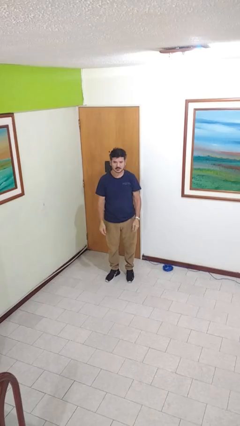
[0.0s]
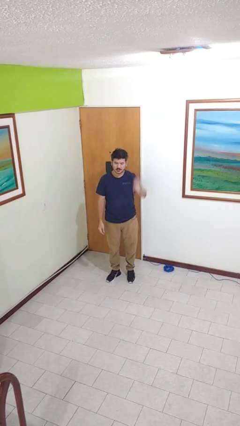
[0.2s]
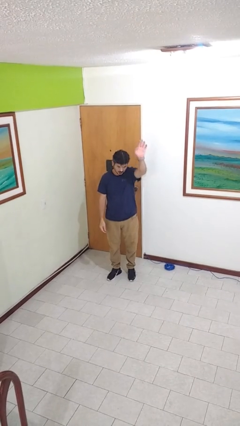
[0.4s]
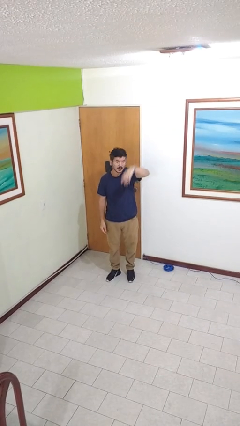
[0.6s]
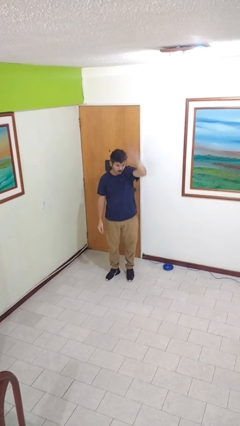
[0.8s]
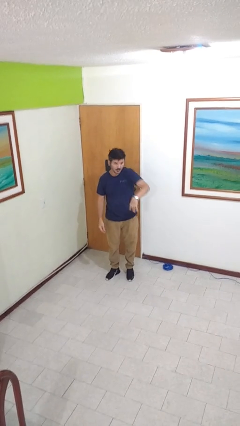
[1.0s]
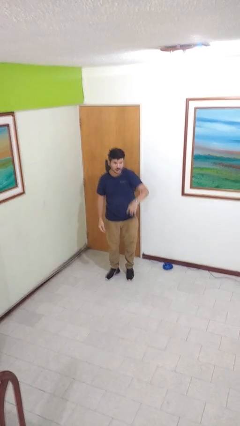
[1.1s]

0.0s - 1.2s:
person gestures come here

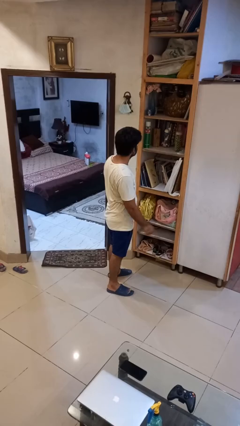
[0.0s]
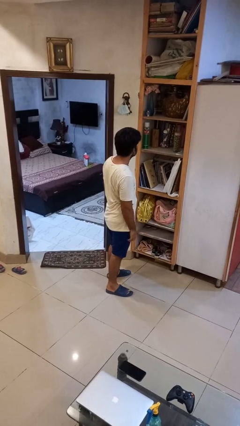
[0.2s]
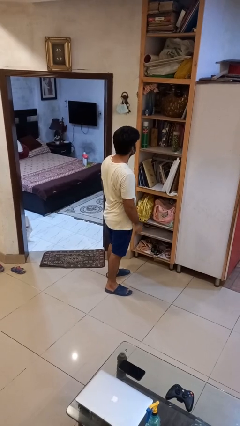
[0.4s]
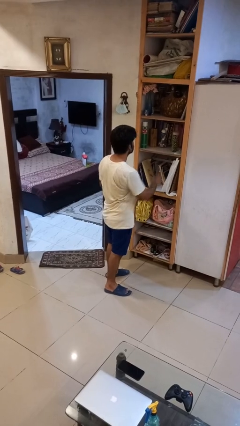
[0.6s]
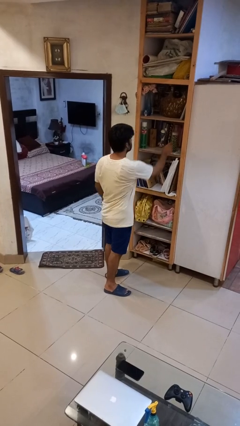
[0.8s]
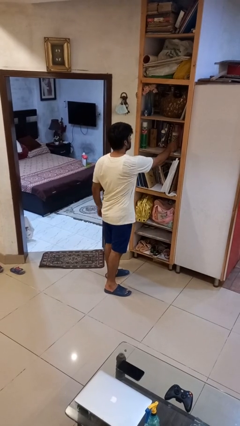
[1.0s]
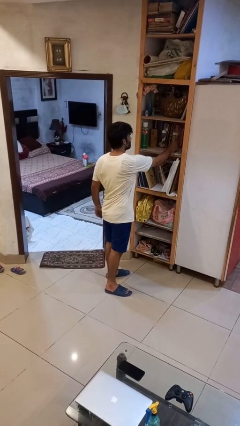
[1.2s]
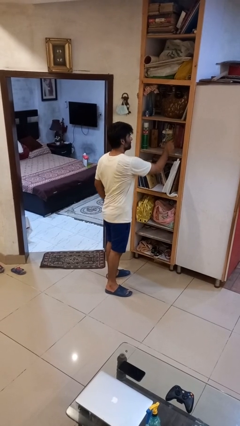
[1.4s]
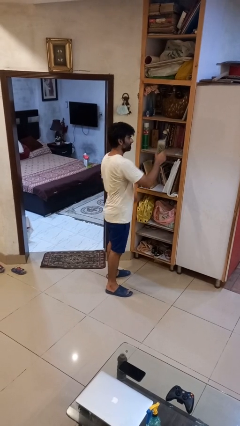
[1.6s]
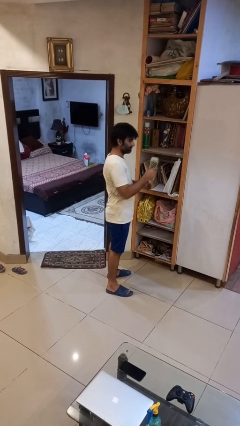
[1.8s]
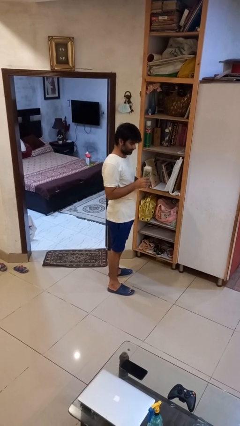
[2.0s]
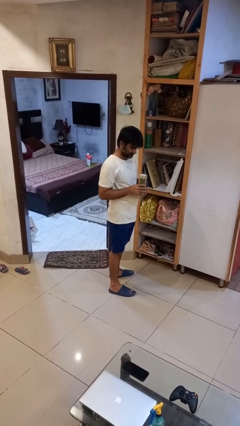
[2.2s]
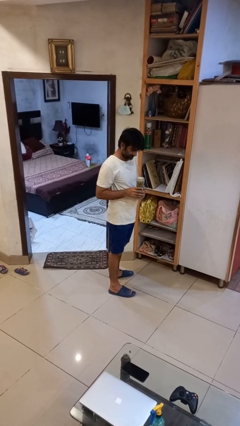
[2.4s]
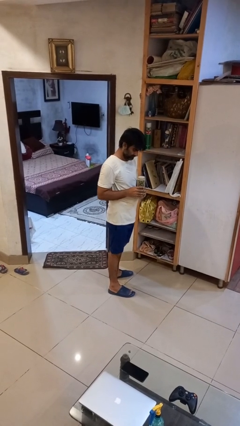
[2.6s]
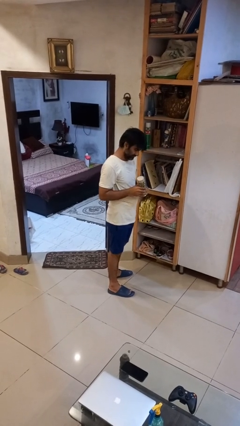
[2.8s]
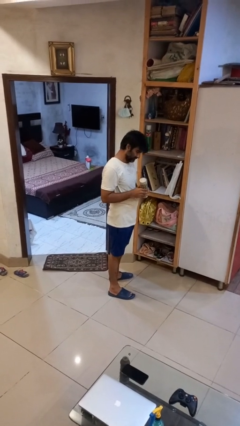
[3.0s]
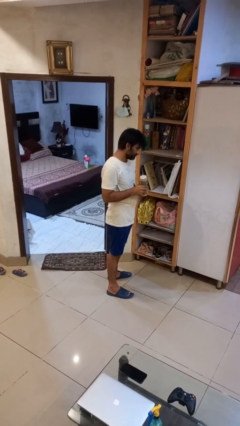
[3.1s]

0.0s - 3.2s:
person picks up object from cabinet

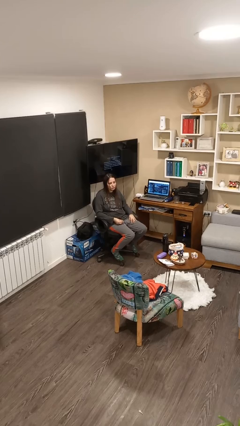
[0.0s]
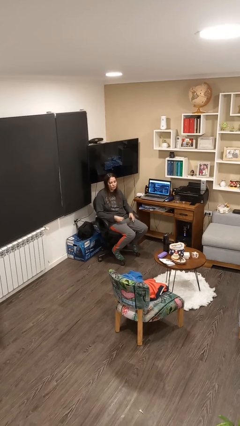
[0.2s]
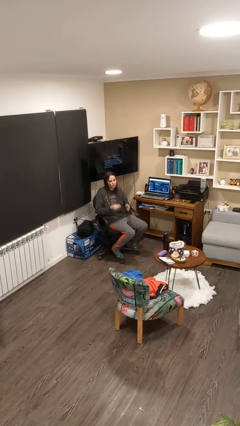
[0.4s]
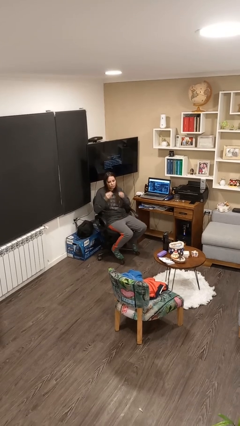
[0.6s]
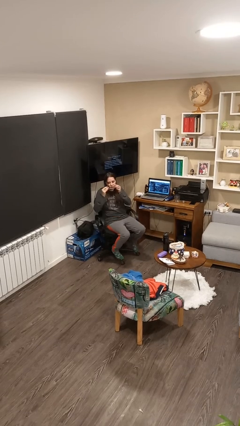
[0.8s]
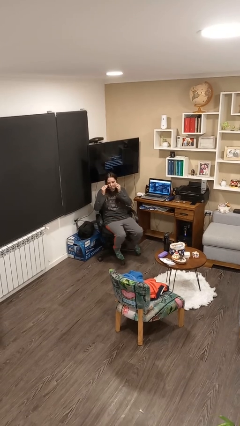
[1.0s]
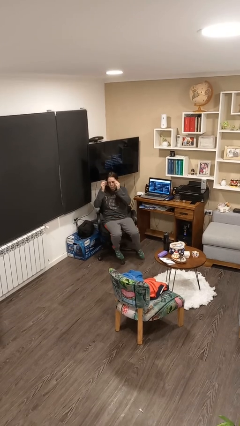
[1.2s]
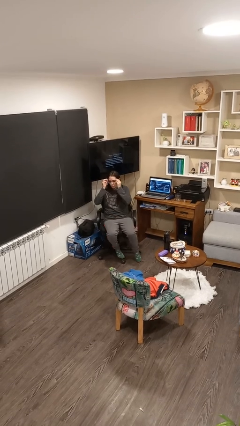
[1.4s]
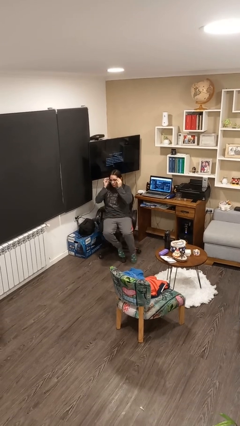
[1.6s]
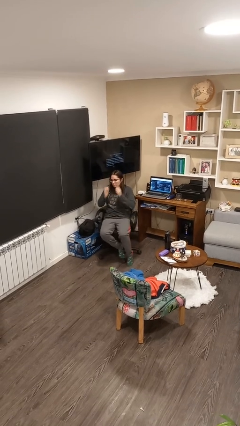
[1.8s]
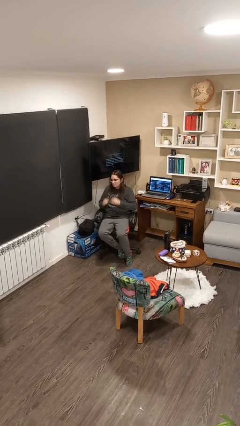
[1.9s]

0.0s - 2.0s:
person puts on glasses

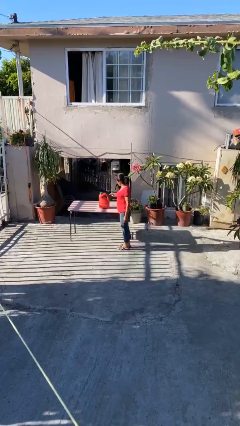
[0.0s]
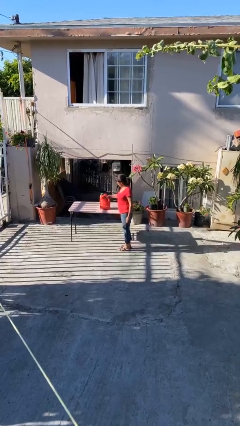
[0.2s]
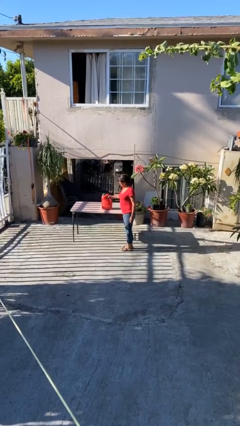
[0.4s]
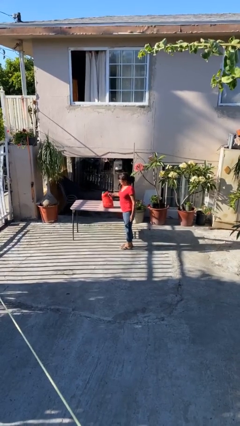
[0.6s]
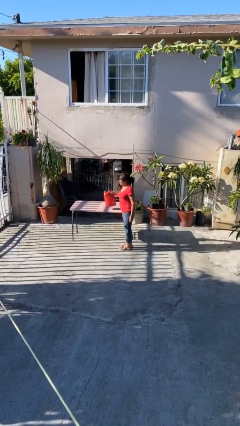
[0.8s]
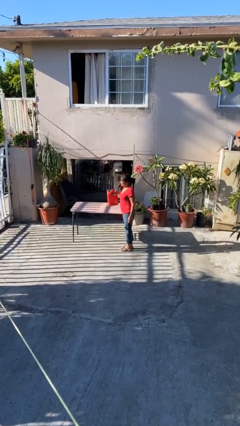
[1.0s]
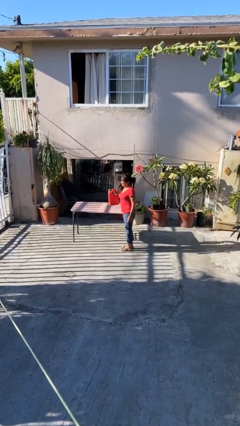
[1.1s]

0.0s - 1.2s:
person picks up object from table

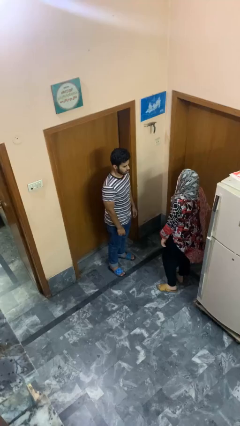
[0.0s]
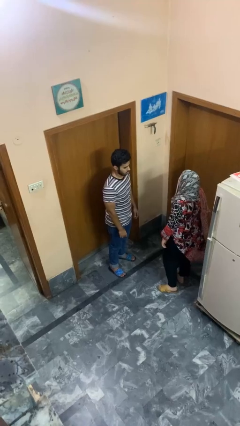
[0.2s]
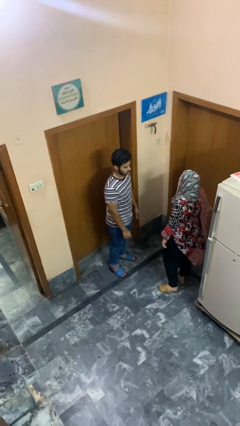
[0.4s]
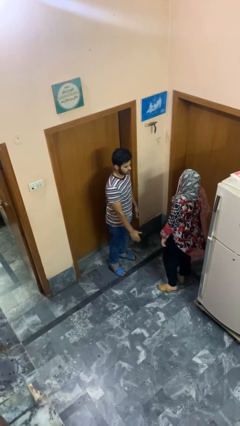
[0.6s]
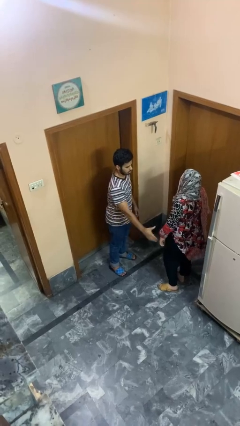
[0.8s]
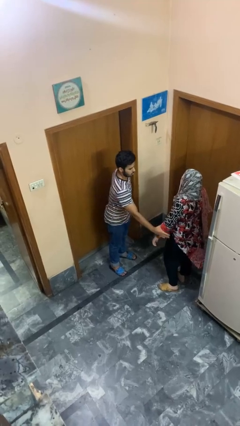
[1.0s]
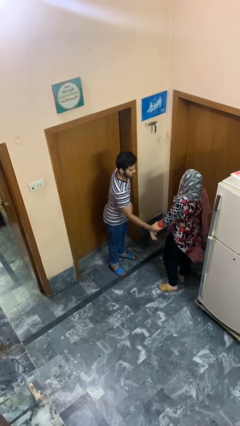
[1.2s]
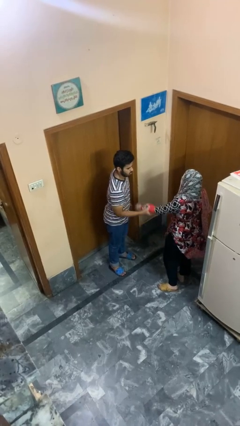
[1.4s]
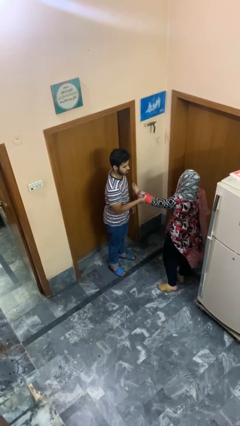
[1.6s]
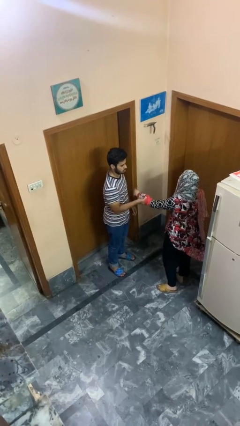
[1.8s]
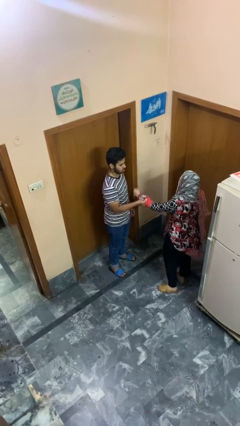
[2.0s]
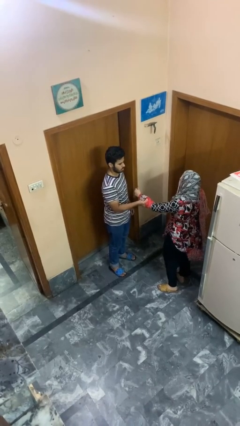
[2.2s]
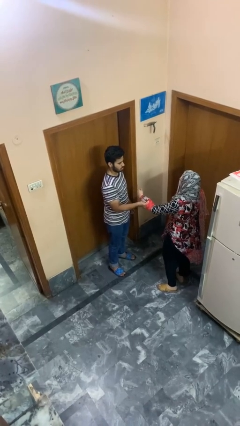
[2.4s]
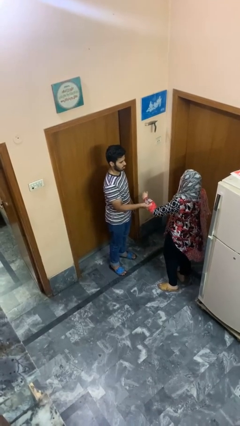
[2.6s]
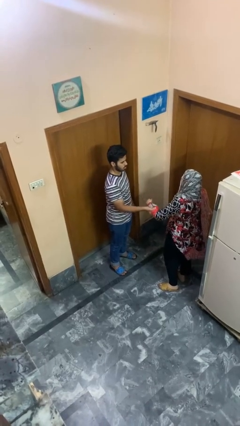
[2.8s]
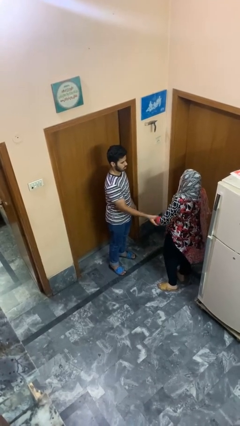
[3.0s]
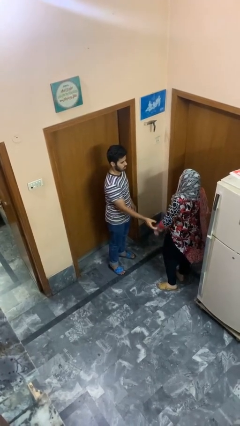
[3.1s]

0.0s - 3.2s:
person grabs person by forearm

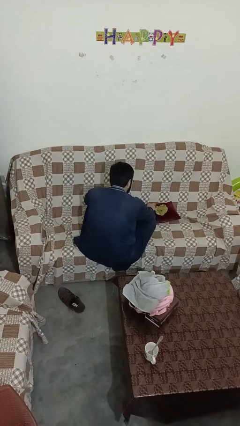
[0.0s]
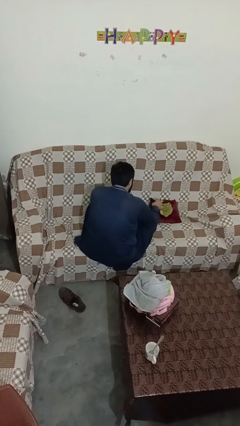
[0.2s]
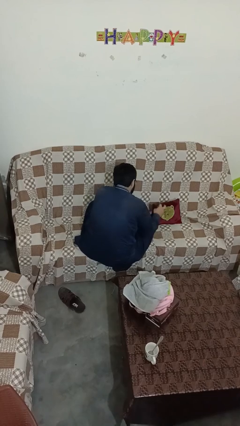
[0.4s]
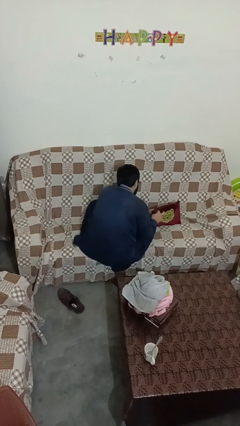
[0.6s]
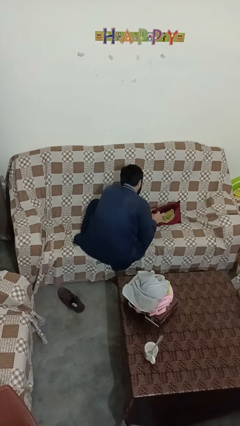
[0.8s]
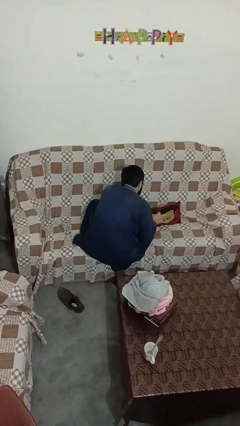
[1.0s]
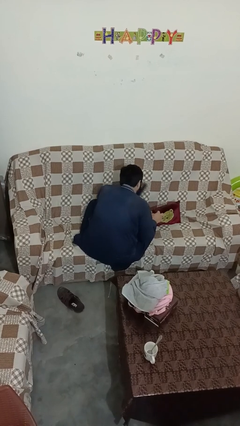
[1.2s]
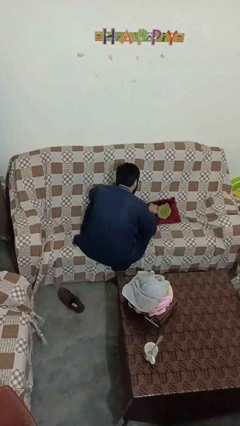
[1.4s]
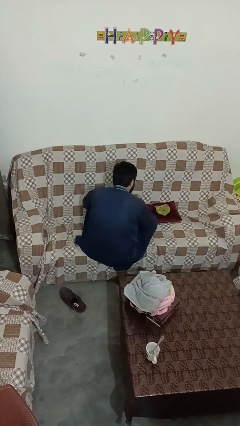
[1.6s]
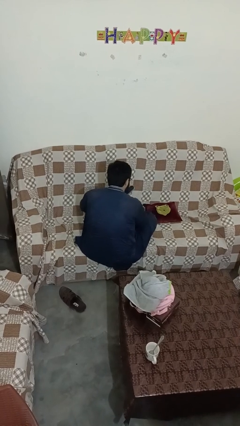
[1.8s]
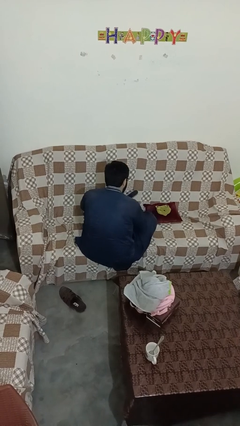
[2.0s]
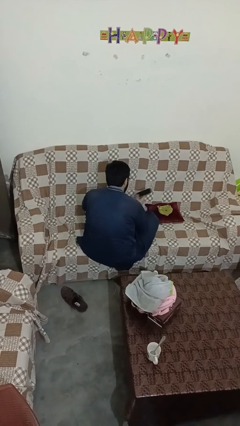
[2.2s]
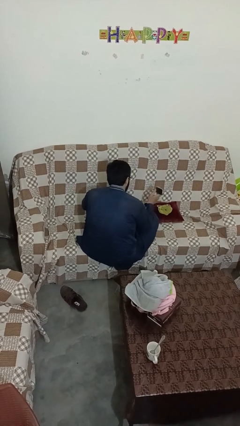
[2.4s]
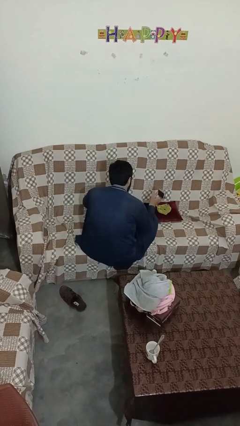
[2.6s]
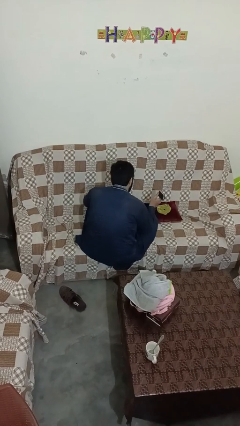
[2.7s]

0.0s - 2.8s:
person searches in couch

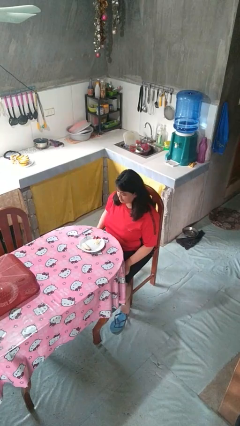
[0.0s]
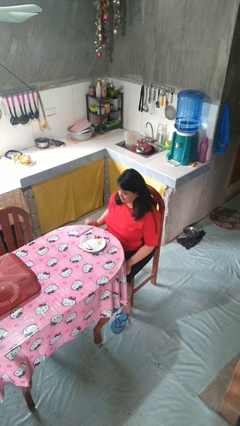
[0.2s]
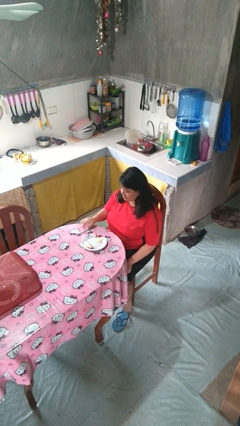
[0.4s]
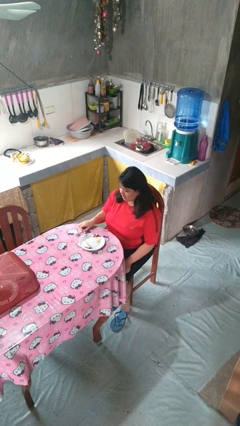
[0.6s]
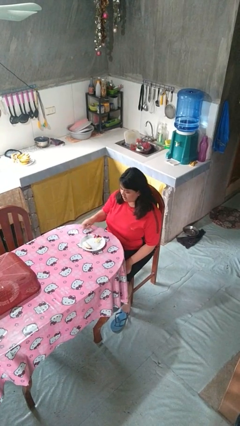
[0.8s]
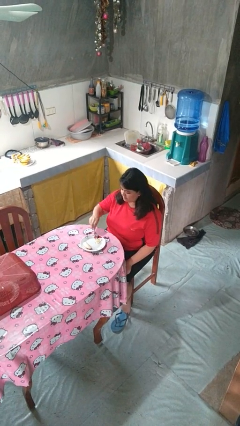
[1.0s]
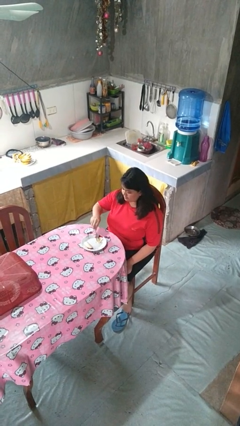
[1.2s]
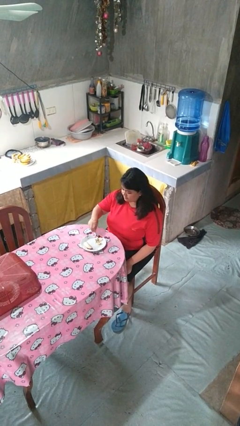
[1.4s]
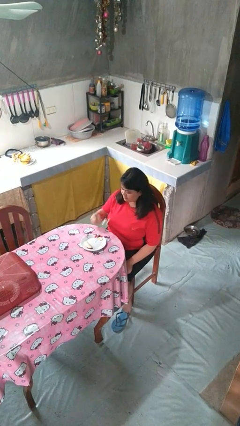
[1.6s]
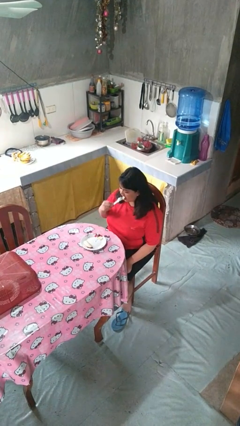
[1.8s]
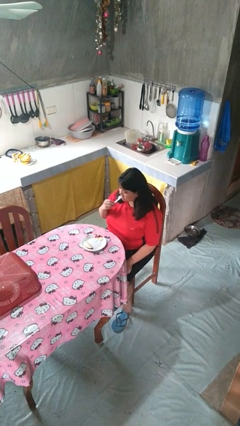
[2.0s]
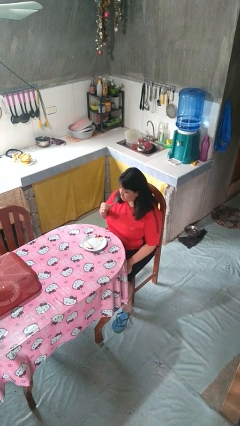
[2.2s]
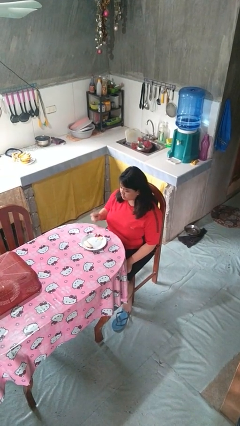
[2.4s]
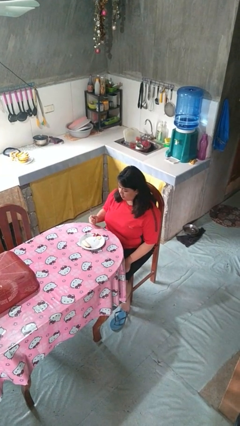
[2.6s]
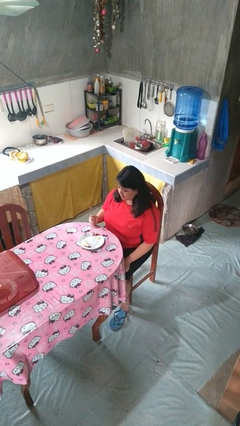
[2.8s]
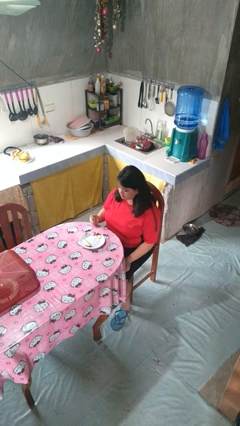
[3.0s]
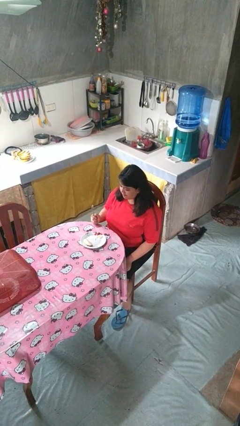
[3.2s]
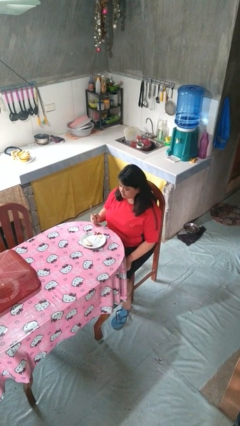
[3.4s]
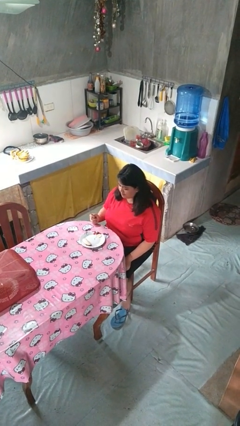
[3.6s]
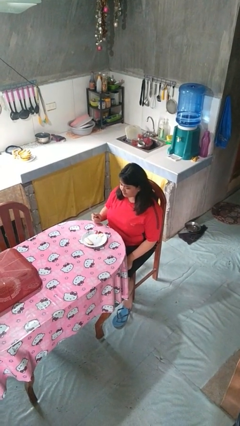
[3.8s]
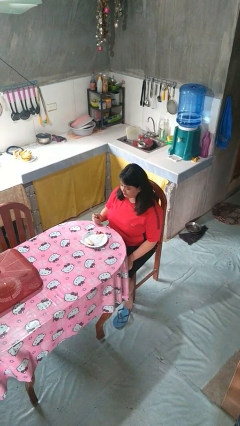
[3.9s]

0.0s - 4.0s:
person eats with utensil
